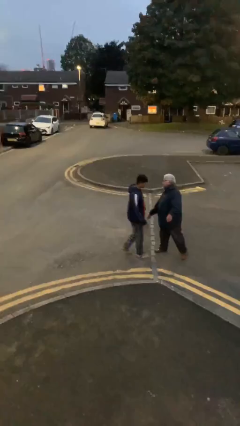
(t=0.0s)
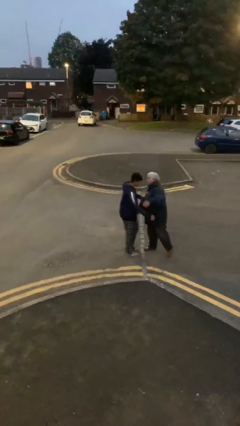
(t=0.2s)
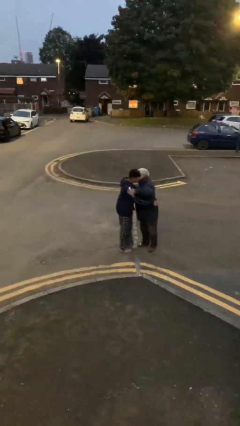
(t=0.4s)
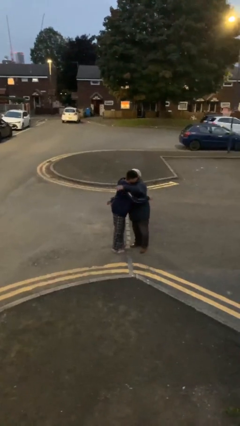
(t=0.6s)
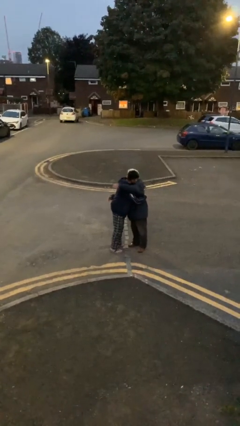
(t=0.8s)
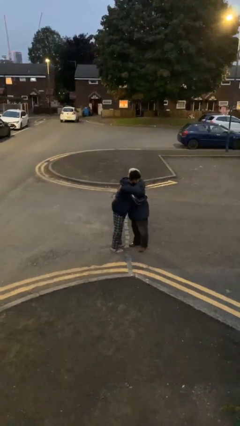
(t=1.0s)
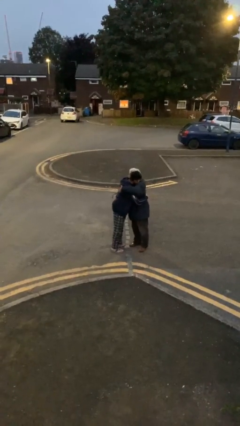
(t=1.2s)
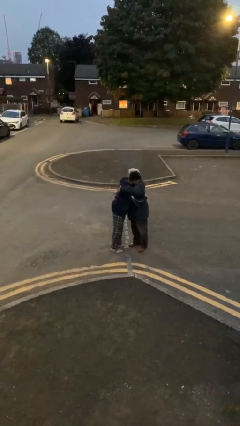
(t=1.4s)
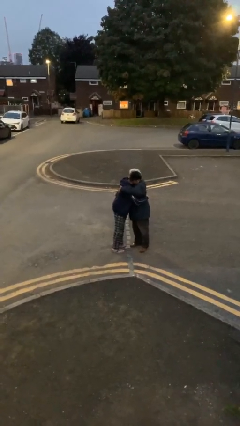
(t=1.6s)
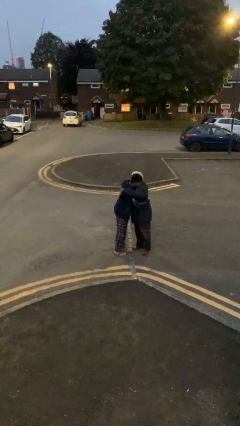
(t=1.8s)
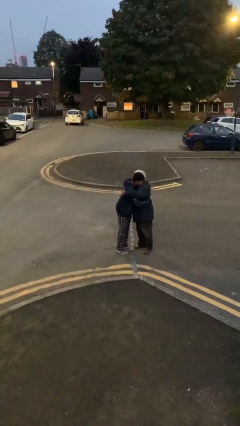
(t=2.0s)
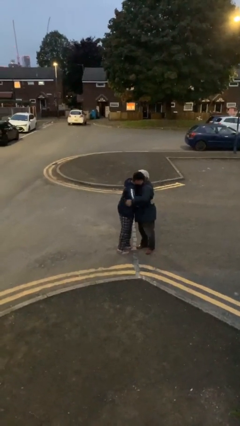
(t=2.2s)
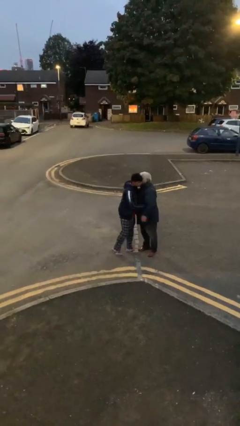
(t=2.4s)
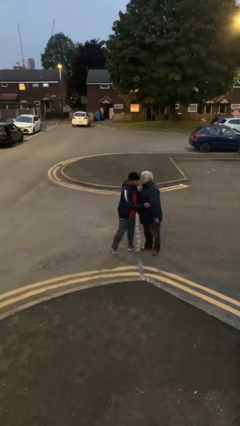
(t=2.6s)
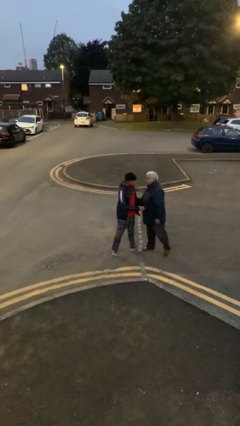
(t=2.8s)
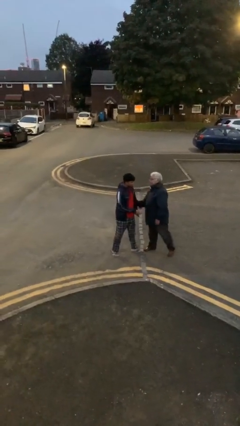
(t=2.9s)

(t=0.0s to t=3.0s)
person embraces person

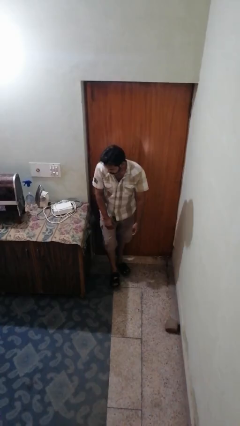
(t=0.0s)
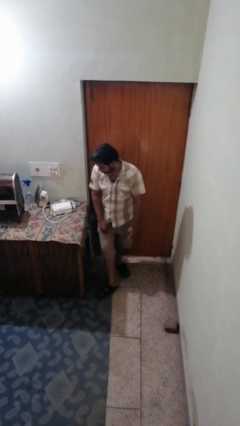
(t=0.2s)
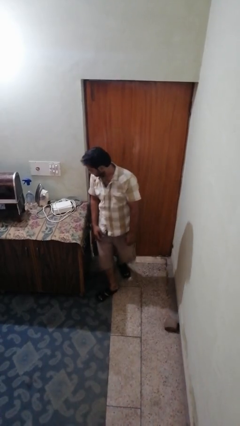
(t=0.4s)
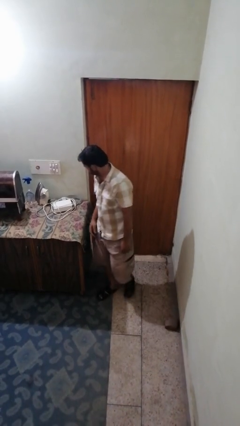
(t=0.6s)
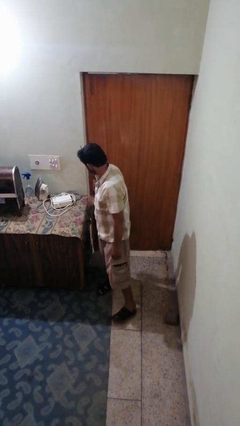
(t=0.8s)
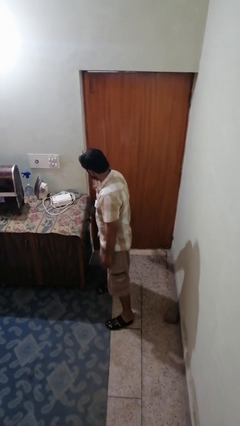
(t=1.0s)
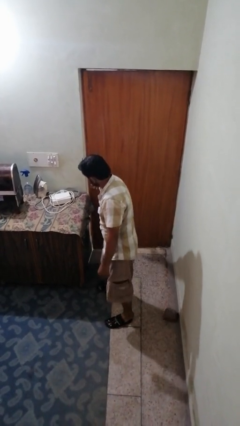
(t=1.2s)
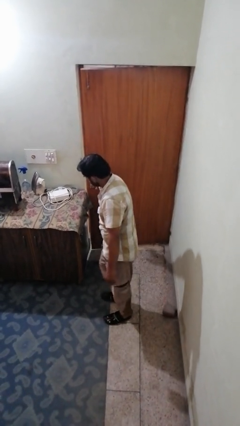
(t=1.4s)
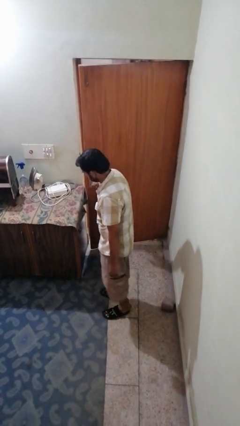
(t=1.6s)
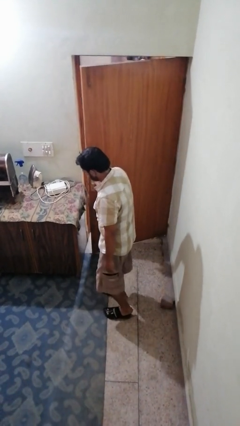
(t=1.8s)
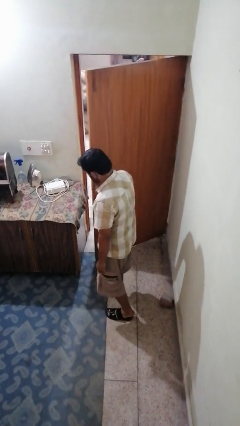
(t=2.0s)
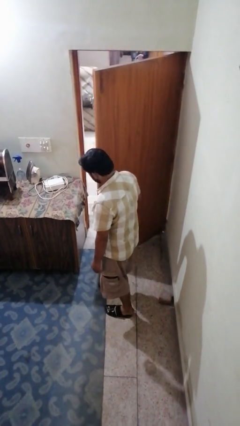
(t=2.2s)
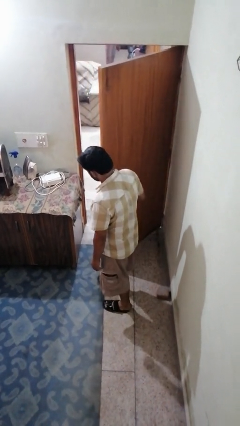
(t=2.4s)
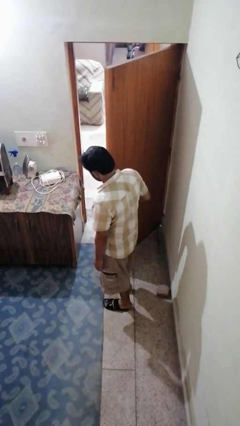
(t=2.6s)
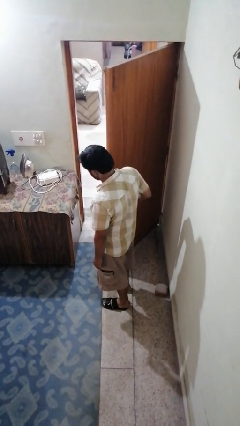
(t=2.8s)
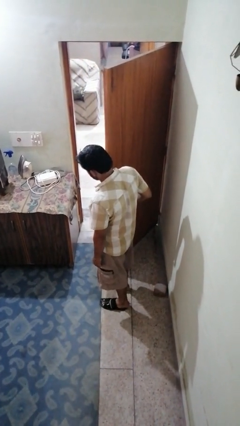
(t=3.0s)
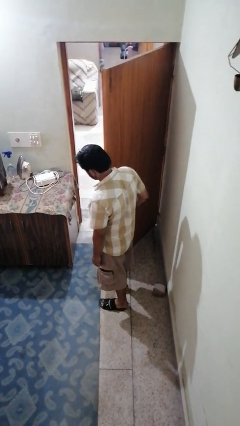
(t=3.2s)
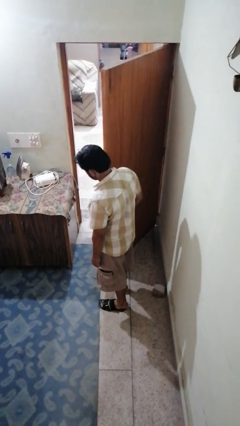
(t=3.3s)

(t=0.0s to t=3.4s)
person opens facility door

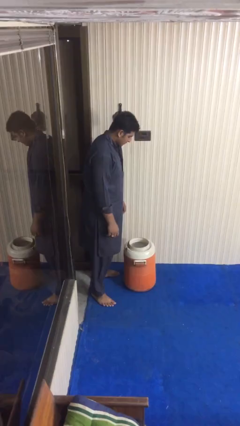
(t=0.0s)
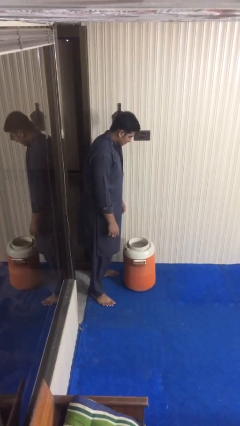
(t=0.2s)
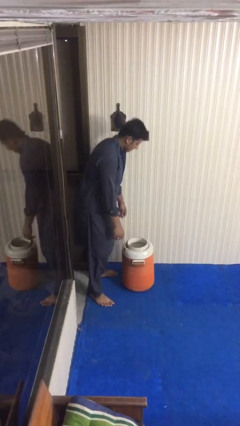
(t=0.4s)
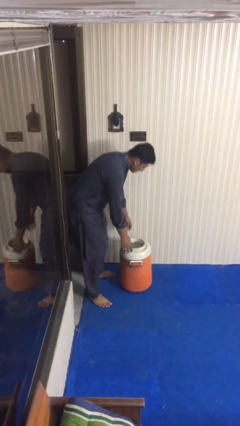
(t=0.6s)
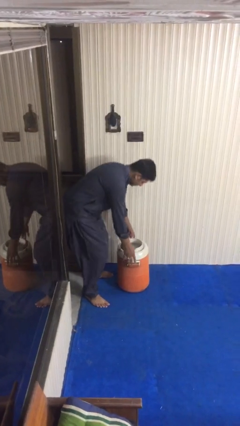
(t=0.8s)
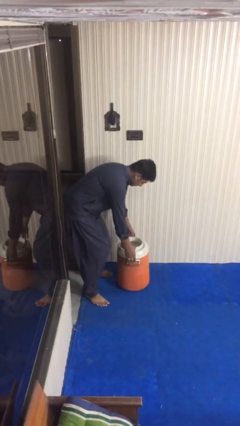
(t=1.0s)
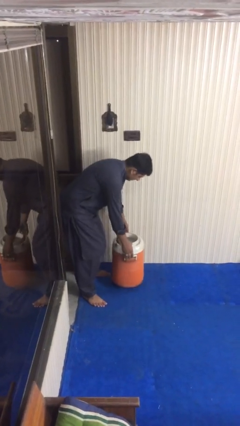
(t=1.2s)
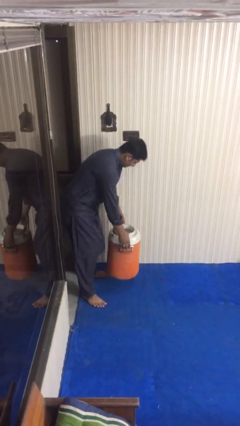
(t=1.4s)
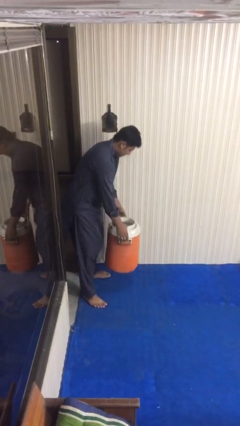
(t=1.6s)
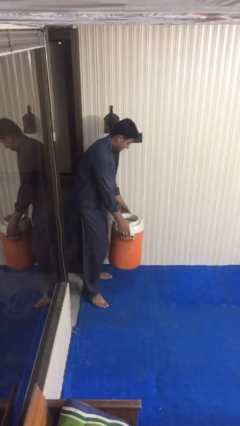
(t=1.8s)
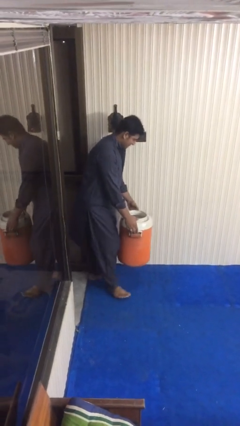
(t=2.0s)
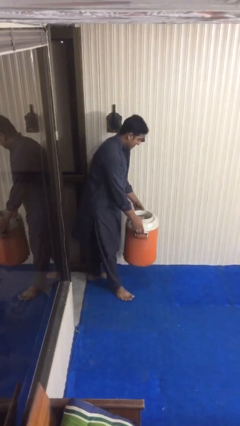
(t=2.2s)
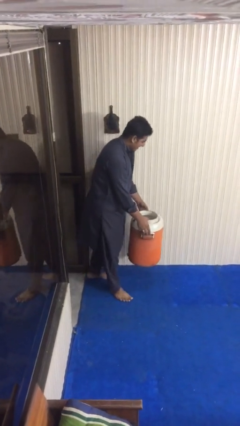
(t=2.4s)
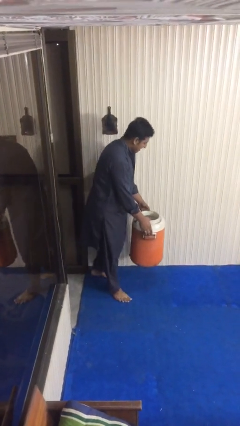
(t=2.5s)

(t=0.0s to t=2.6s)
person picks up object from floor

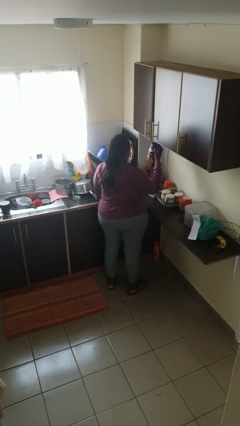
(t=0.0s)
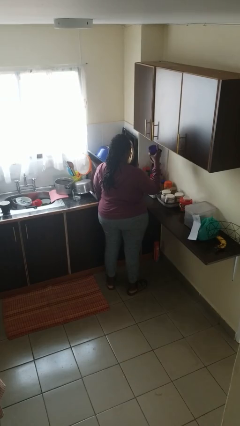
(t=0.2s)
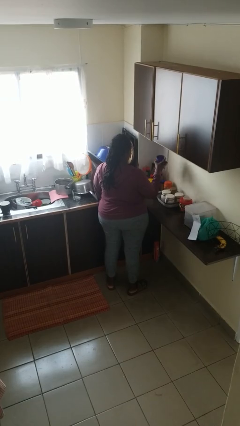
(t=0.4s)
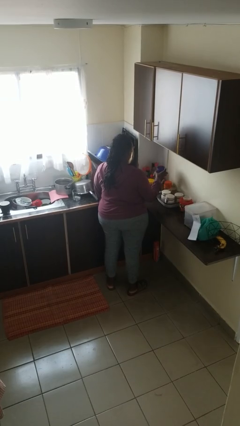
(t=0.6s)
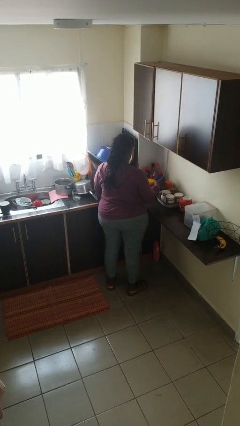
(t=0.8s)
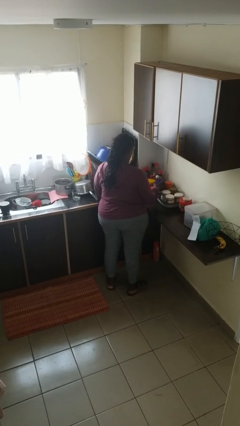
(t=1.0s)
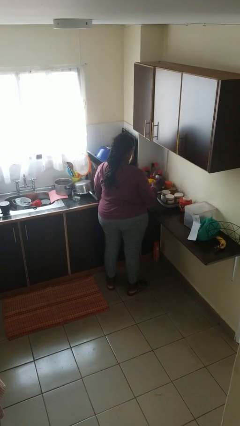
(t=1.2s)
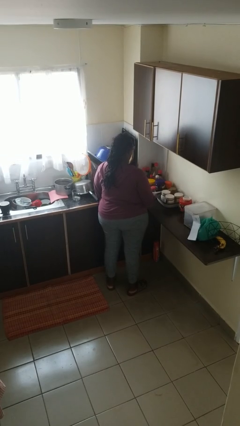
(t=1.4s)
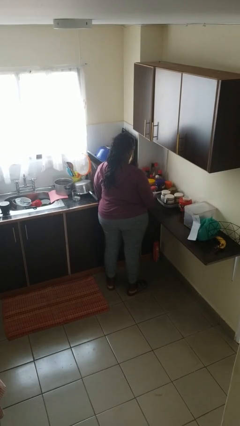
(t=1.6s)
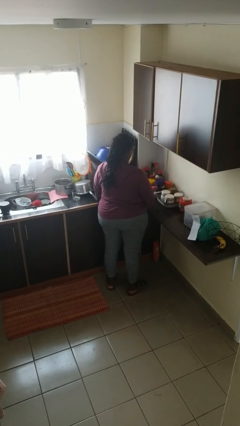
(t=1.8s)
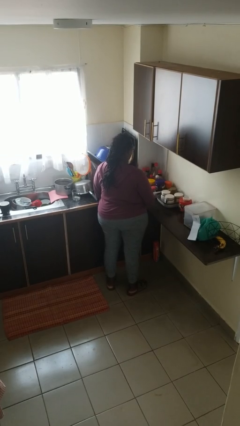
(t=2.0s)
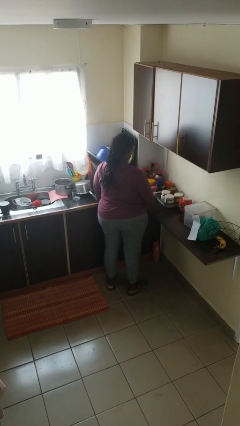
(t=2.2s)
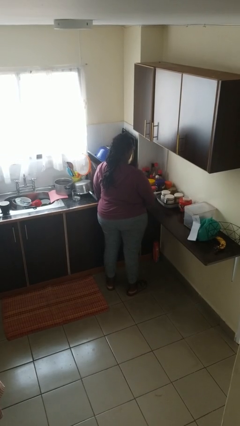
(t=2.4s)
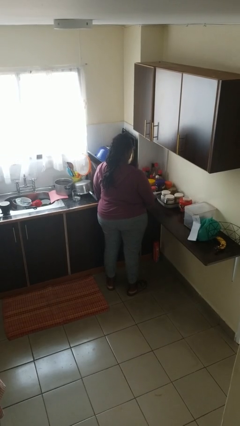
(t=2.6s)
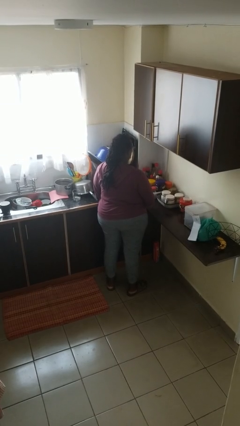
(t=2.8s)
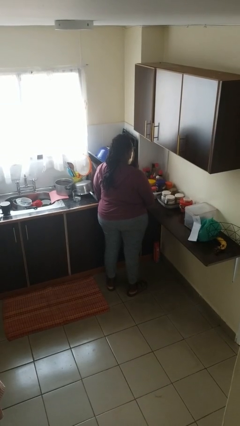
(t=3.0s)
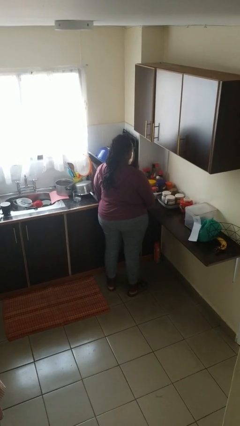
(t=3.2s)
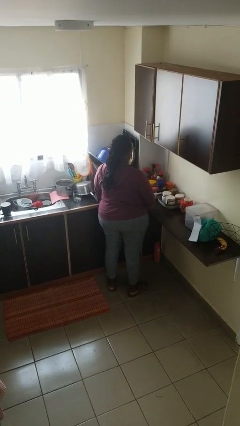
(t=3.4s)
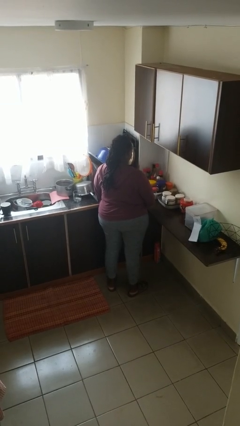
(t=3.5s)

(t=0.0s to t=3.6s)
person puts down object on countertop

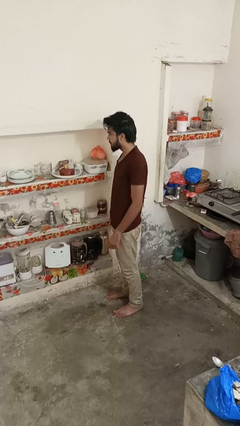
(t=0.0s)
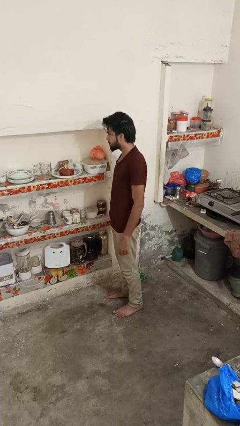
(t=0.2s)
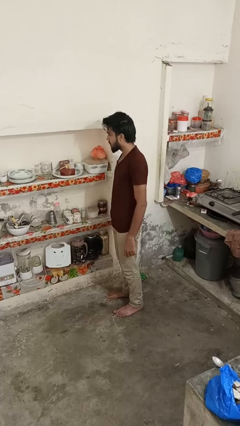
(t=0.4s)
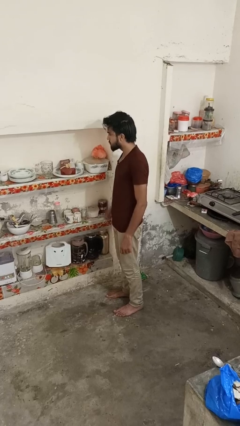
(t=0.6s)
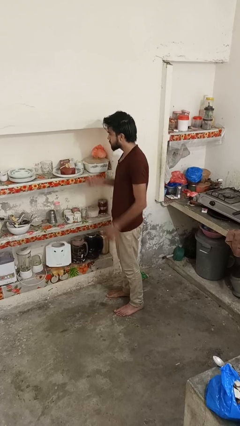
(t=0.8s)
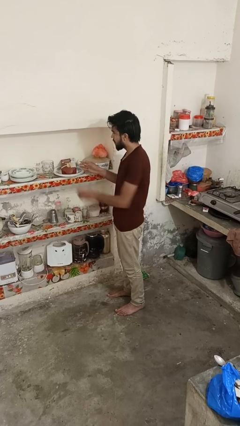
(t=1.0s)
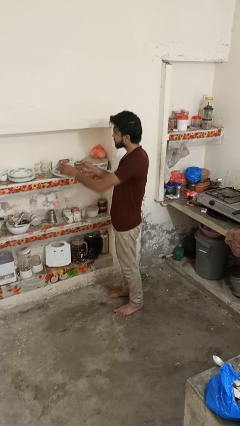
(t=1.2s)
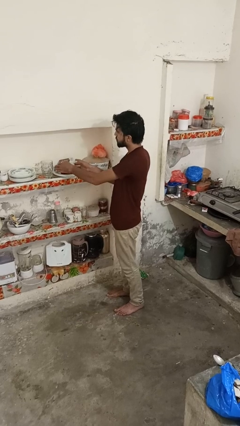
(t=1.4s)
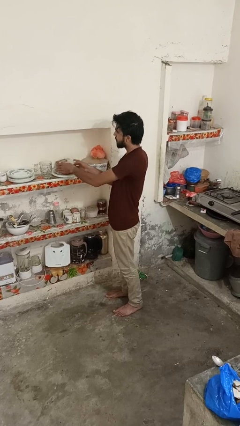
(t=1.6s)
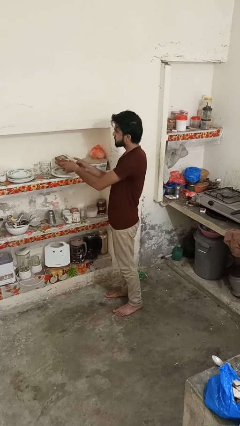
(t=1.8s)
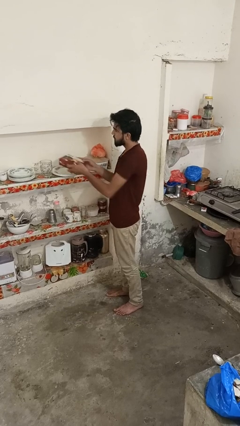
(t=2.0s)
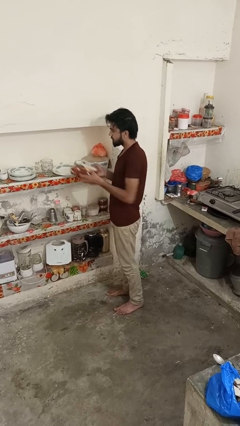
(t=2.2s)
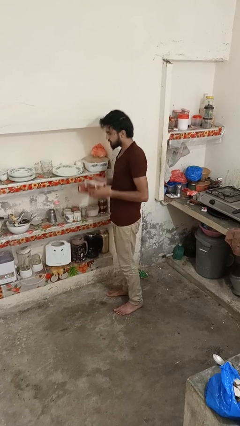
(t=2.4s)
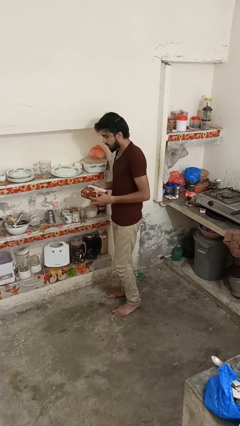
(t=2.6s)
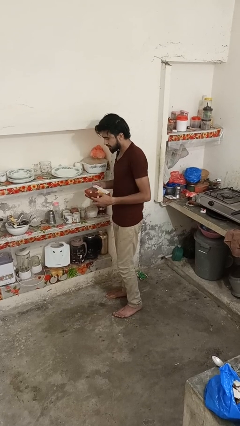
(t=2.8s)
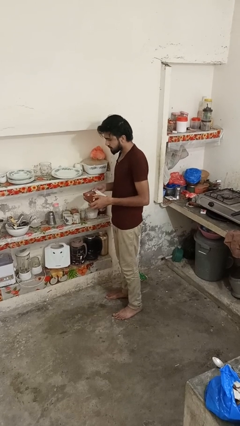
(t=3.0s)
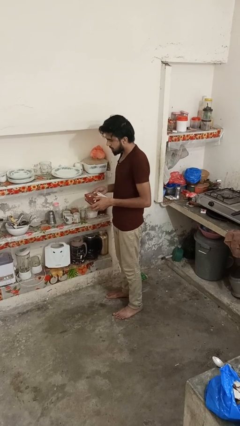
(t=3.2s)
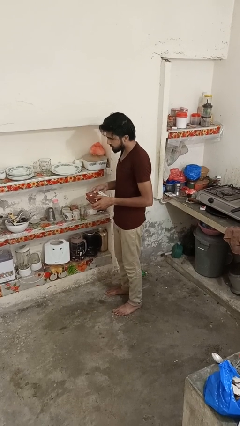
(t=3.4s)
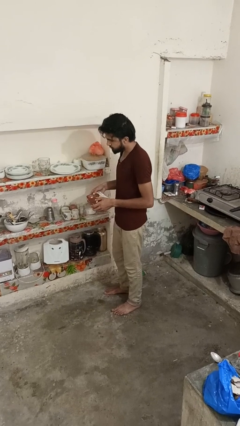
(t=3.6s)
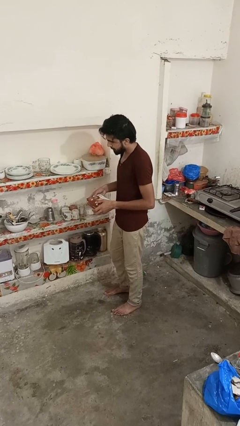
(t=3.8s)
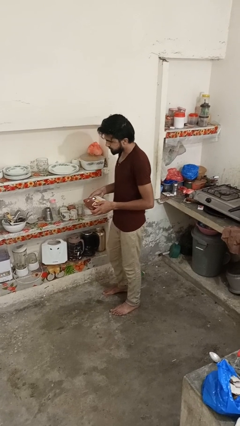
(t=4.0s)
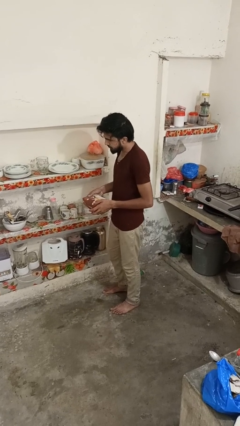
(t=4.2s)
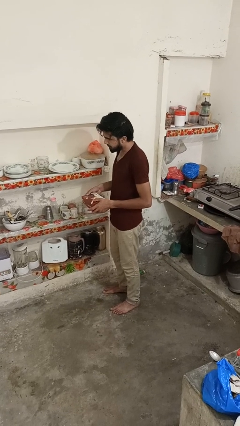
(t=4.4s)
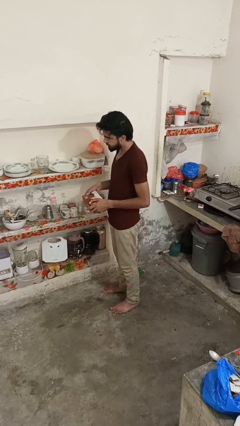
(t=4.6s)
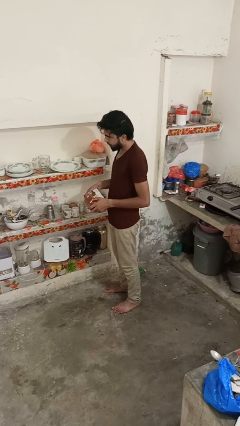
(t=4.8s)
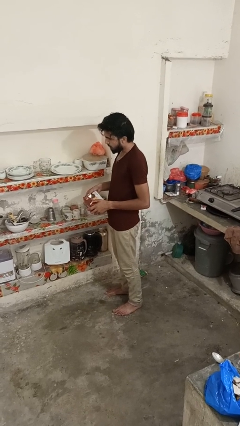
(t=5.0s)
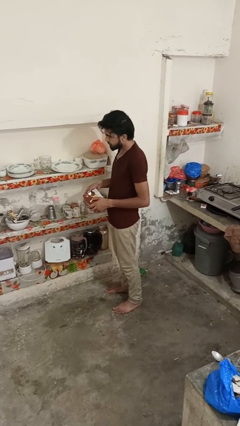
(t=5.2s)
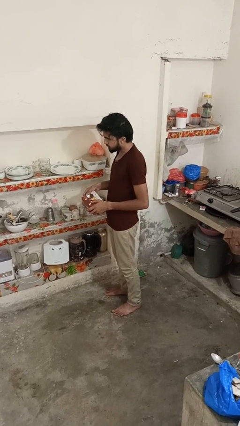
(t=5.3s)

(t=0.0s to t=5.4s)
person picks up object from cabinet
